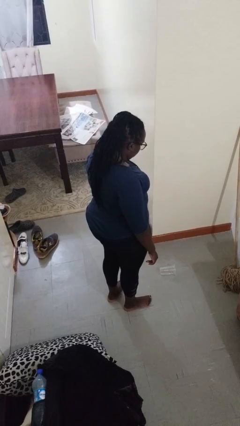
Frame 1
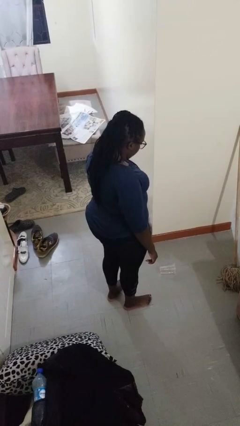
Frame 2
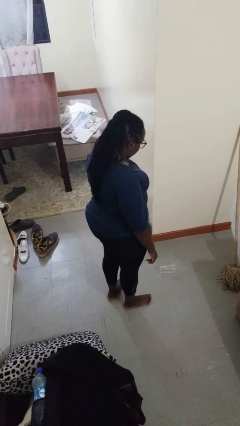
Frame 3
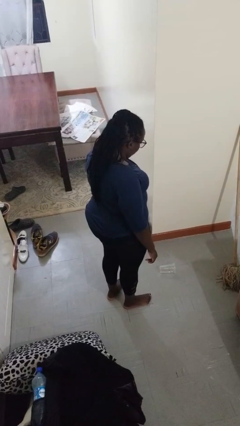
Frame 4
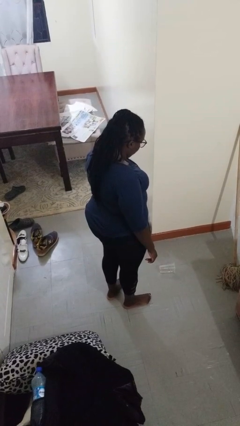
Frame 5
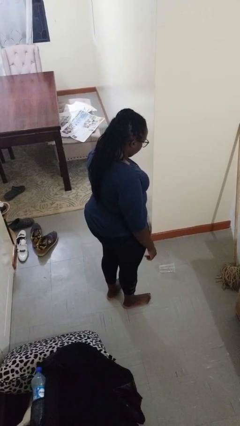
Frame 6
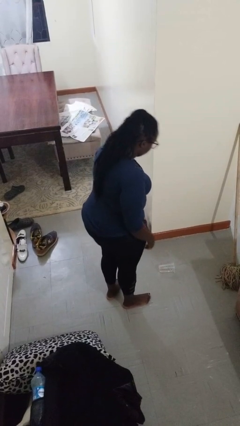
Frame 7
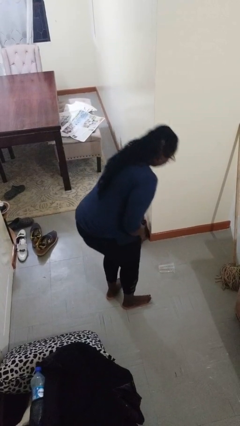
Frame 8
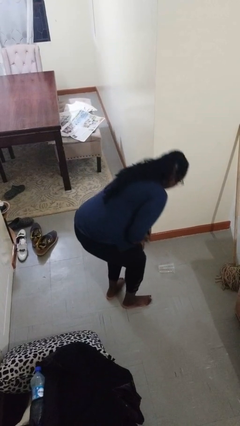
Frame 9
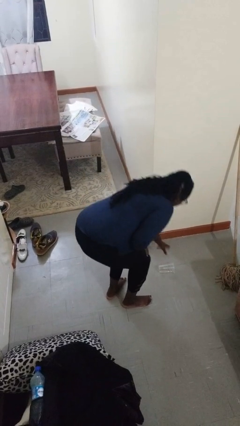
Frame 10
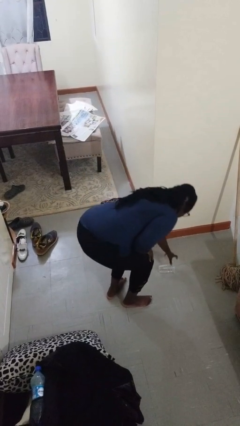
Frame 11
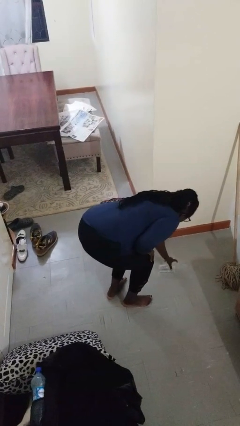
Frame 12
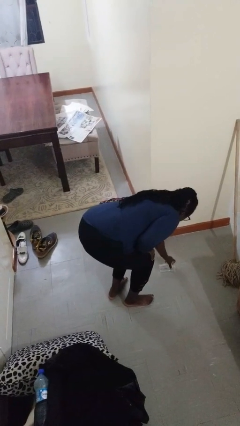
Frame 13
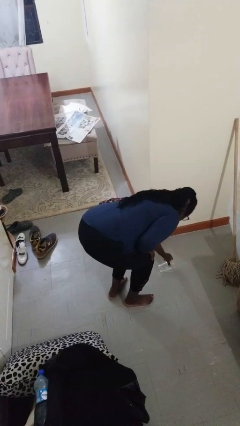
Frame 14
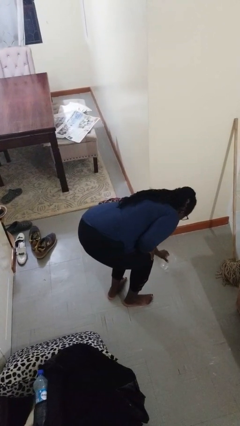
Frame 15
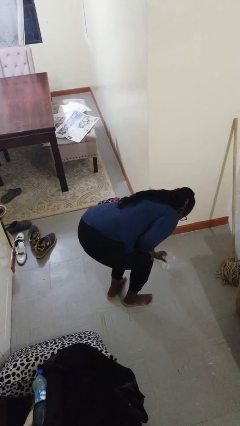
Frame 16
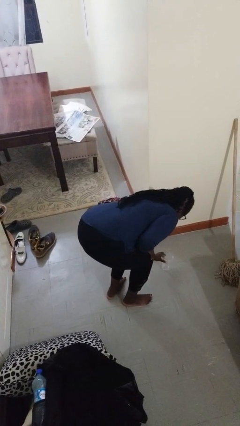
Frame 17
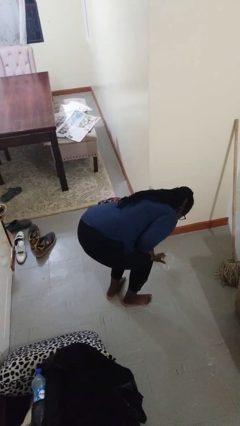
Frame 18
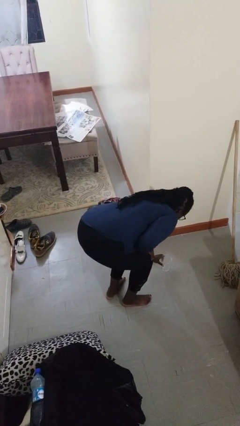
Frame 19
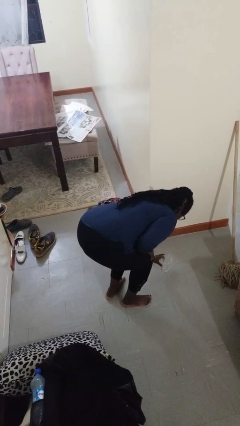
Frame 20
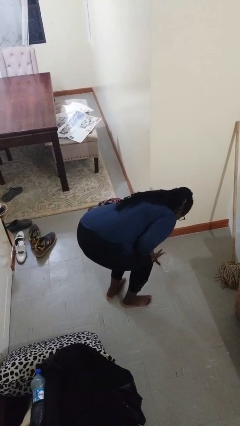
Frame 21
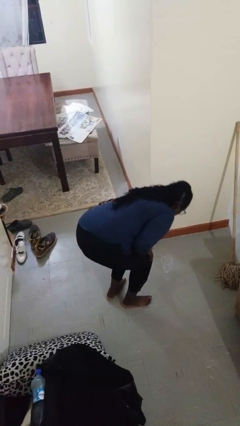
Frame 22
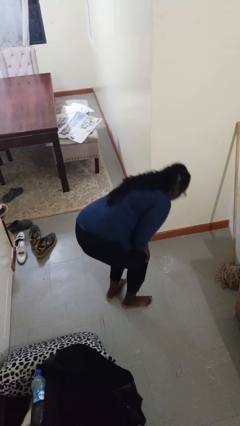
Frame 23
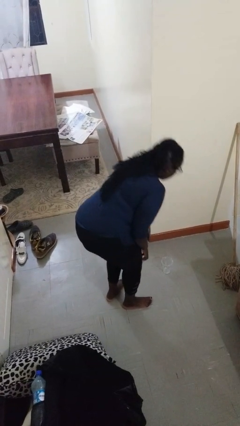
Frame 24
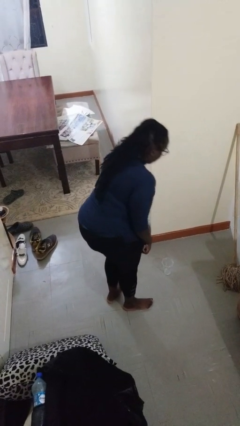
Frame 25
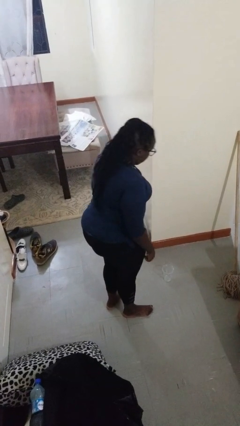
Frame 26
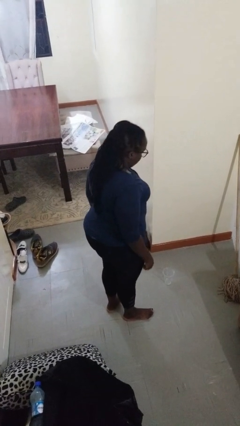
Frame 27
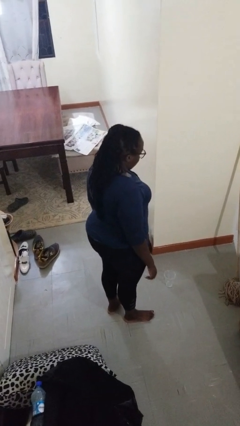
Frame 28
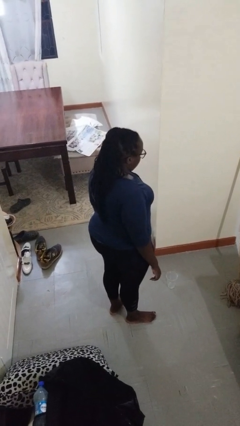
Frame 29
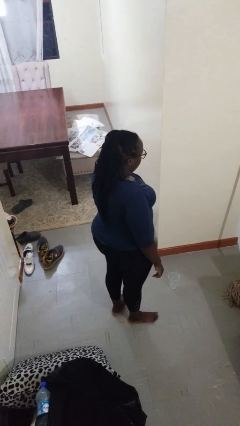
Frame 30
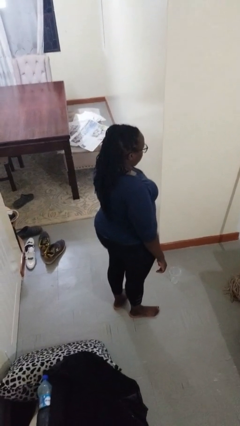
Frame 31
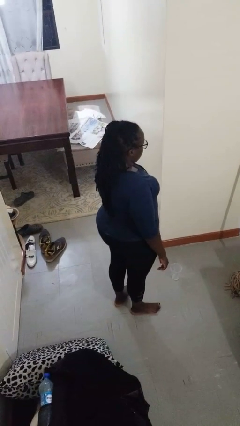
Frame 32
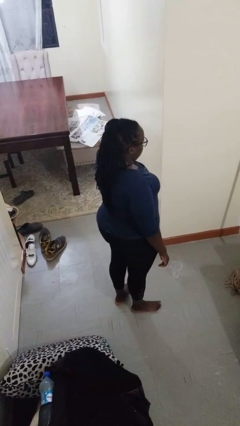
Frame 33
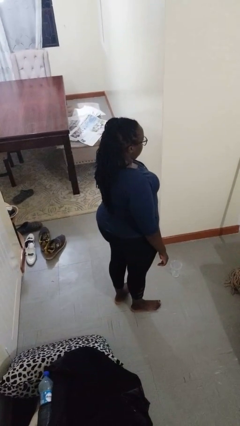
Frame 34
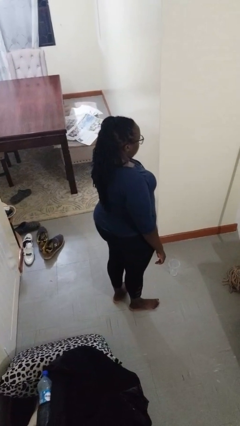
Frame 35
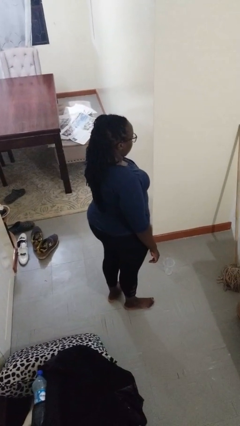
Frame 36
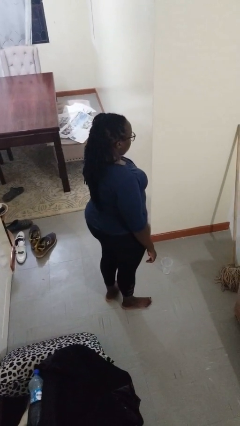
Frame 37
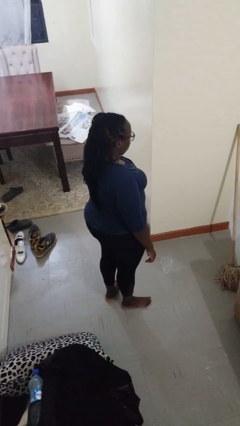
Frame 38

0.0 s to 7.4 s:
person sets upright glass

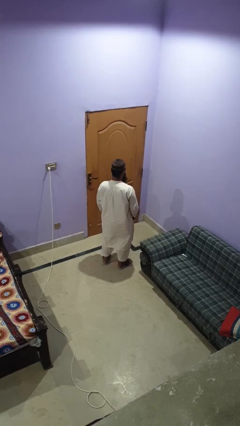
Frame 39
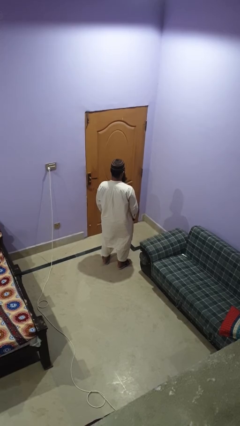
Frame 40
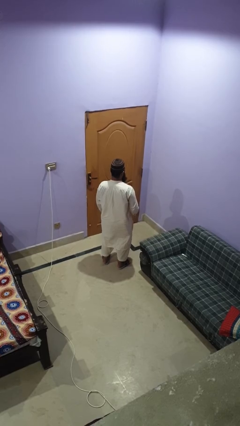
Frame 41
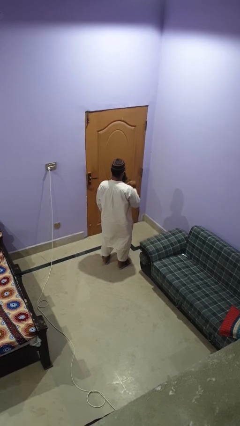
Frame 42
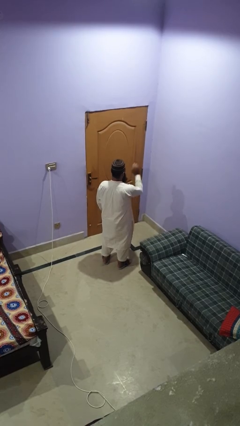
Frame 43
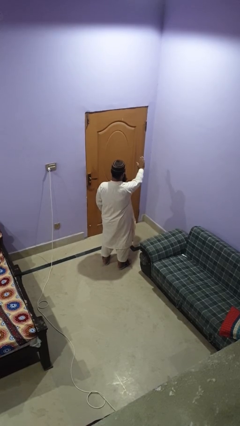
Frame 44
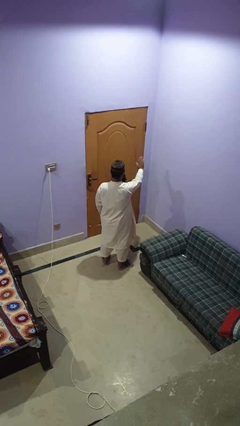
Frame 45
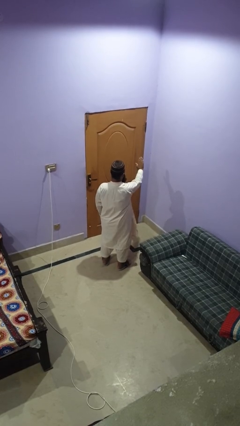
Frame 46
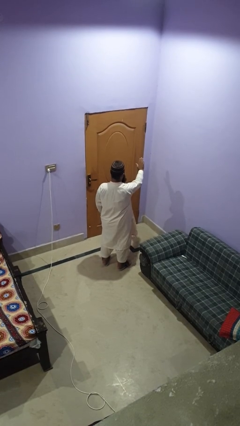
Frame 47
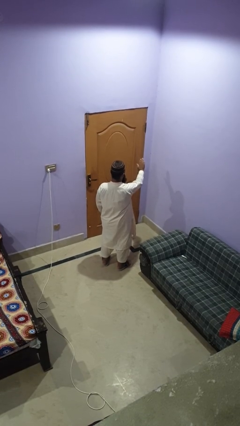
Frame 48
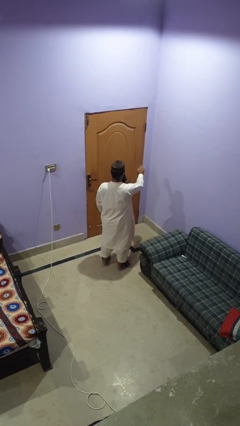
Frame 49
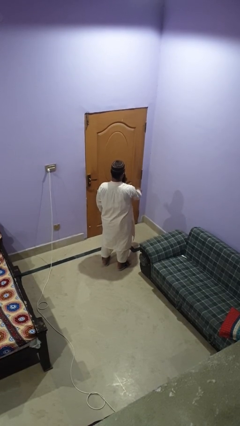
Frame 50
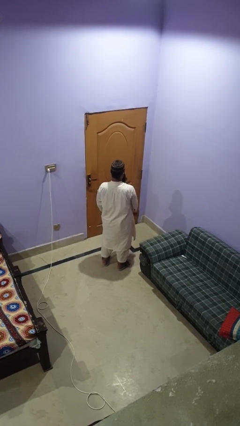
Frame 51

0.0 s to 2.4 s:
person gestures stop

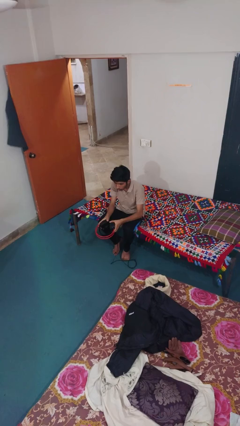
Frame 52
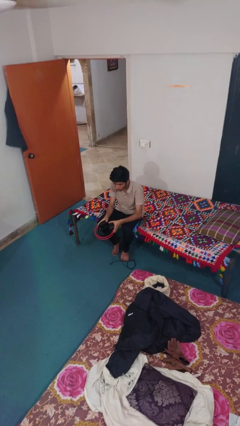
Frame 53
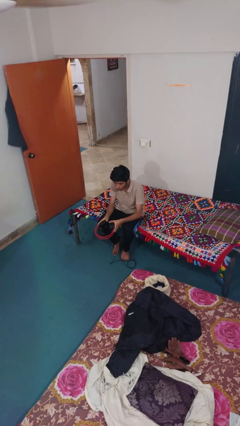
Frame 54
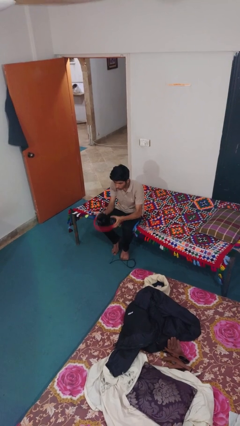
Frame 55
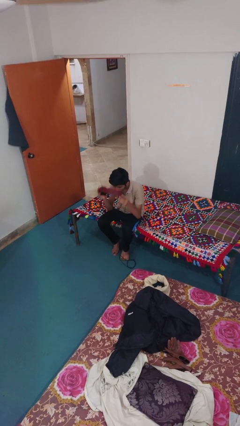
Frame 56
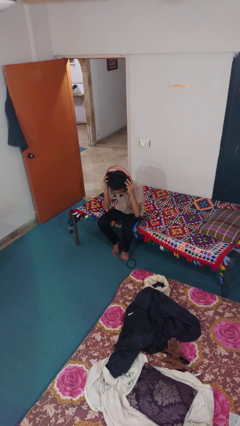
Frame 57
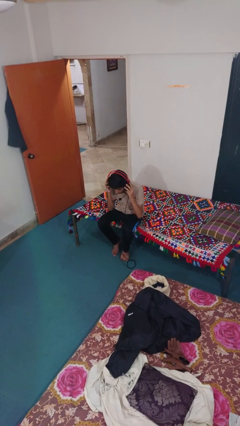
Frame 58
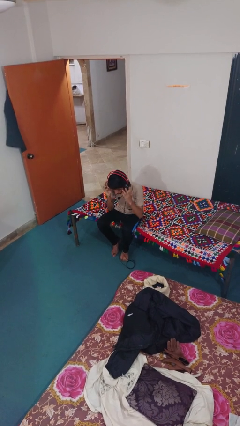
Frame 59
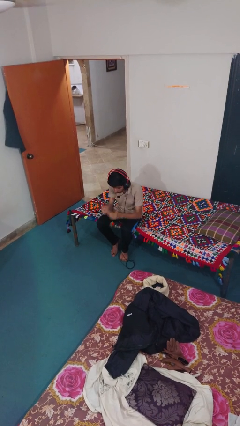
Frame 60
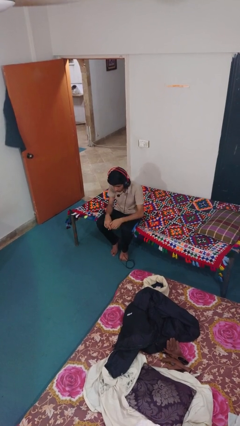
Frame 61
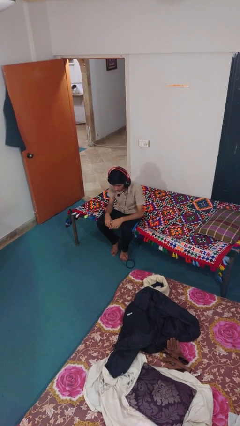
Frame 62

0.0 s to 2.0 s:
person puts on headphones

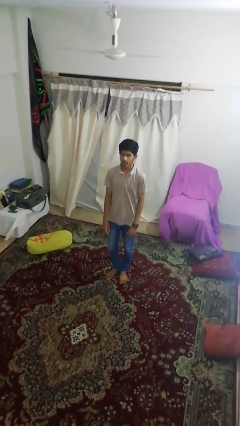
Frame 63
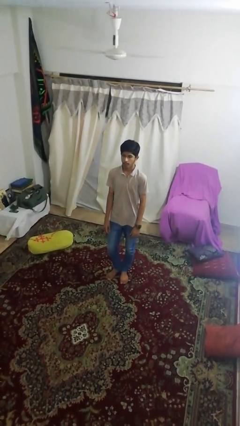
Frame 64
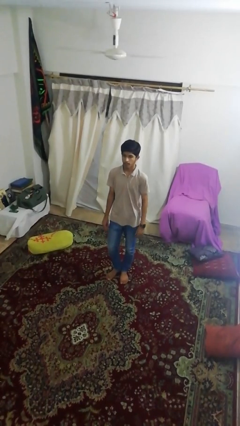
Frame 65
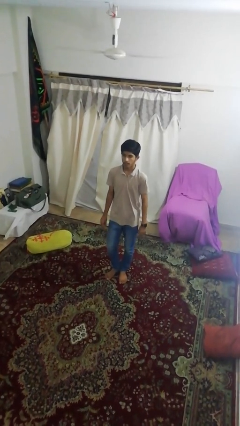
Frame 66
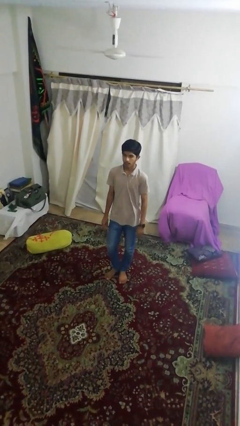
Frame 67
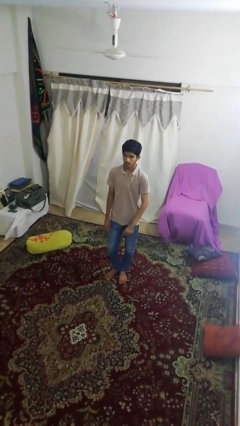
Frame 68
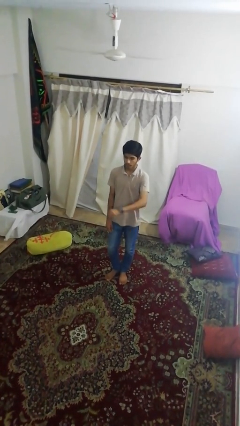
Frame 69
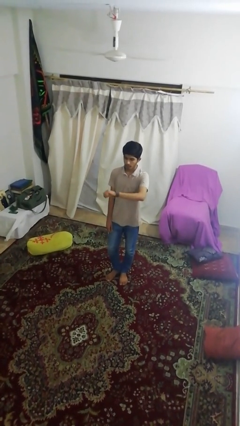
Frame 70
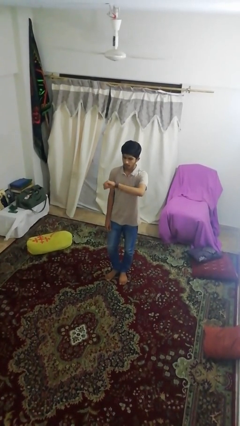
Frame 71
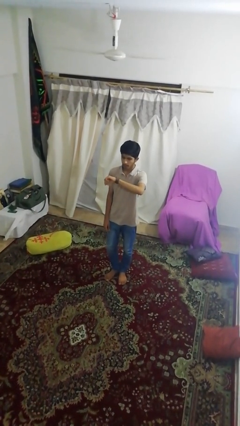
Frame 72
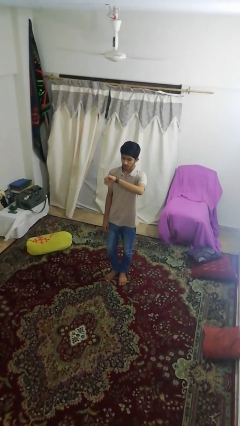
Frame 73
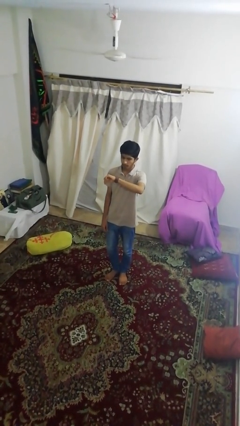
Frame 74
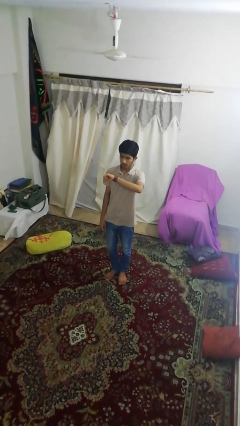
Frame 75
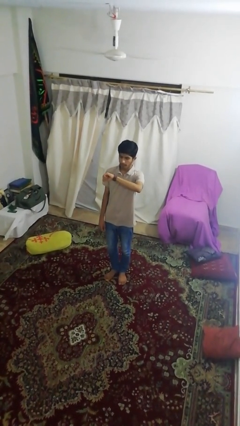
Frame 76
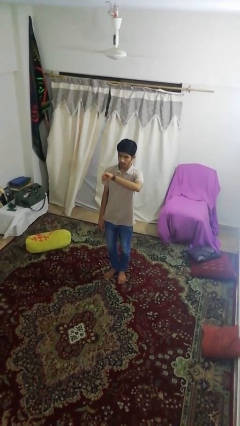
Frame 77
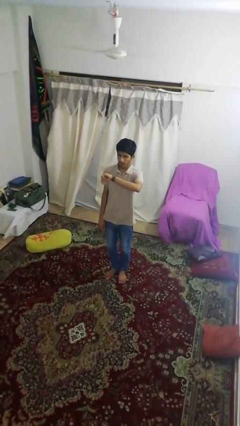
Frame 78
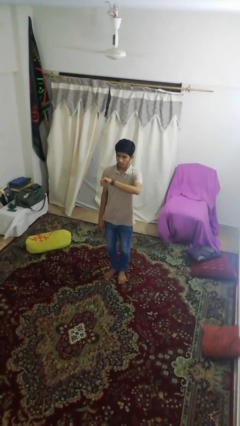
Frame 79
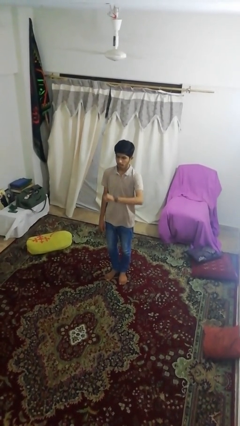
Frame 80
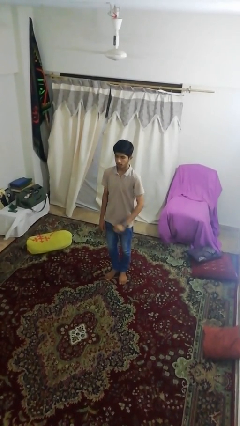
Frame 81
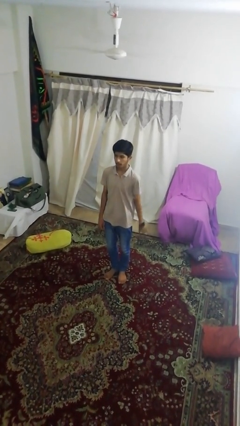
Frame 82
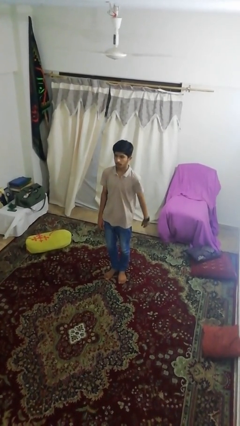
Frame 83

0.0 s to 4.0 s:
person looks at wristwatch

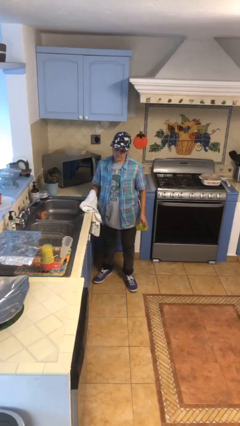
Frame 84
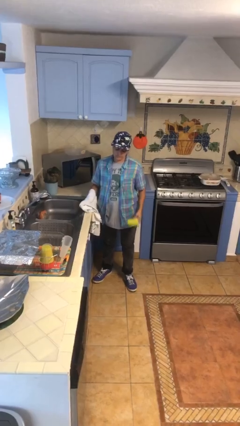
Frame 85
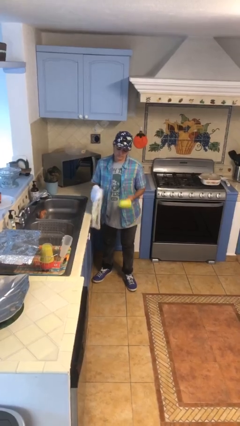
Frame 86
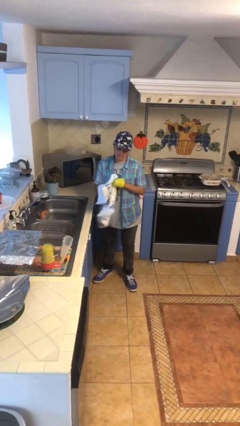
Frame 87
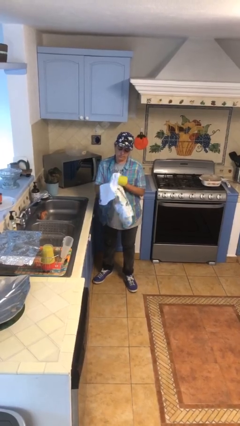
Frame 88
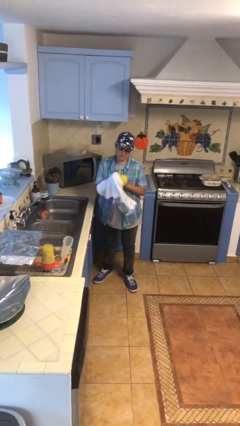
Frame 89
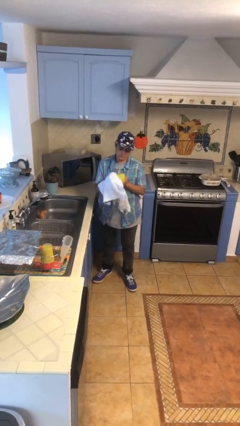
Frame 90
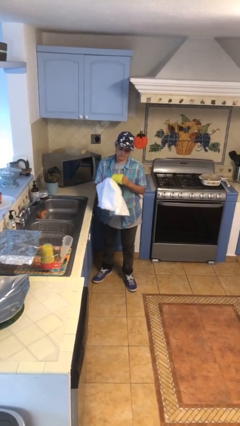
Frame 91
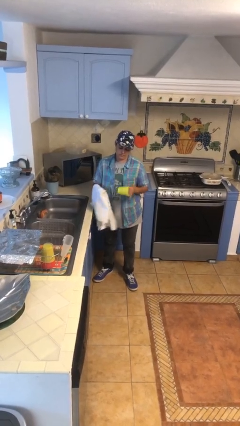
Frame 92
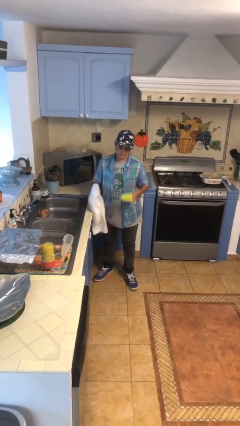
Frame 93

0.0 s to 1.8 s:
person dries dish
